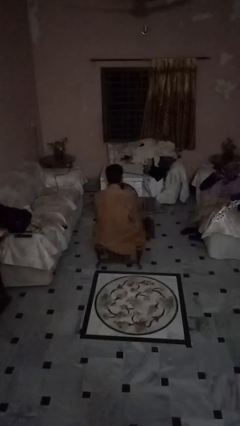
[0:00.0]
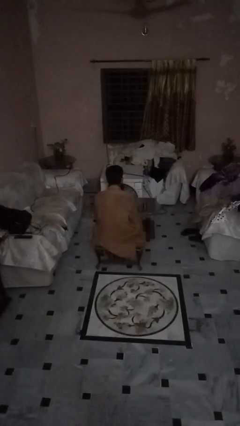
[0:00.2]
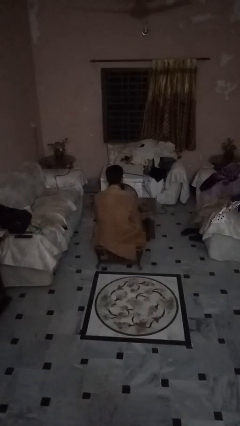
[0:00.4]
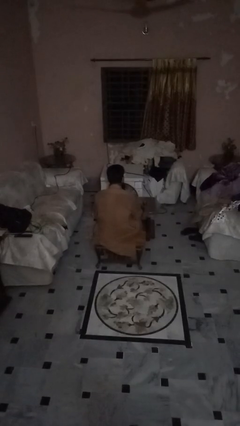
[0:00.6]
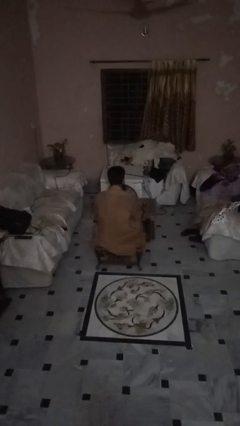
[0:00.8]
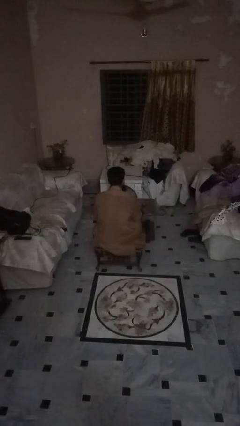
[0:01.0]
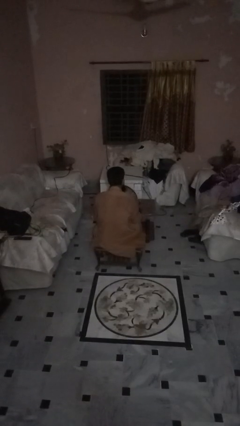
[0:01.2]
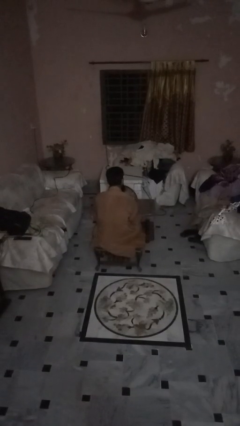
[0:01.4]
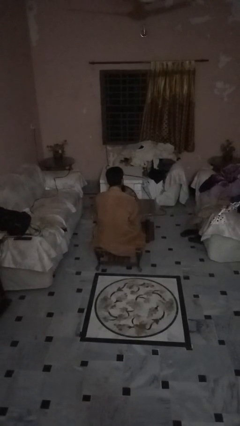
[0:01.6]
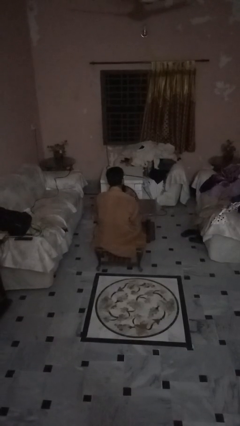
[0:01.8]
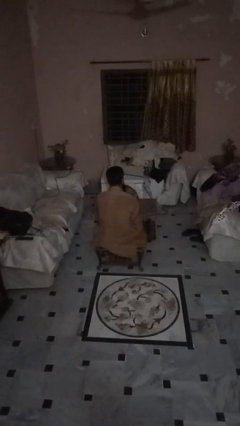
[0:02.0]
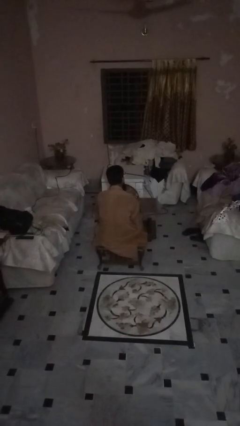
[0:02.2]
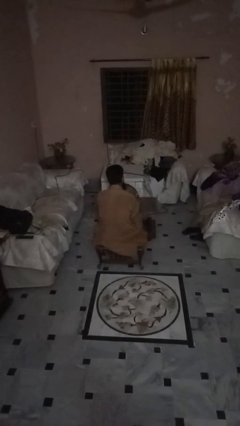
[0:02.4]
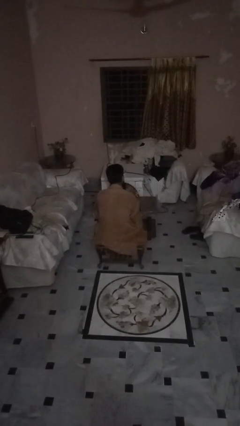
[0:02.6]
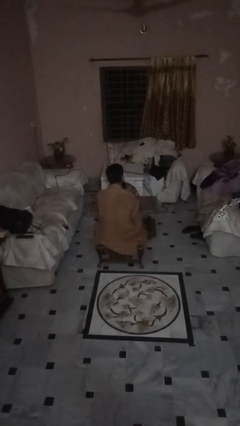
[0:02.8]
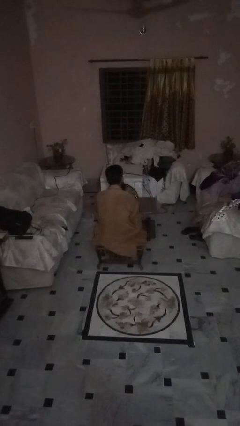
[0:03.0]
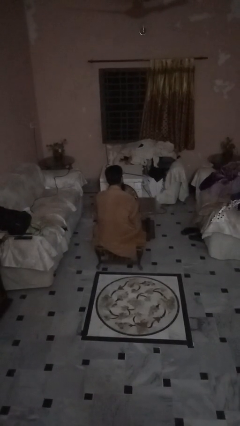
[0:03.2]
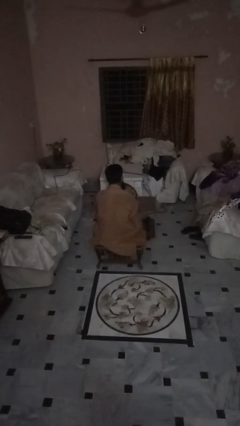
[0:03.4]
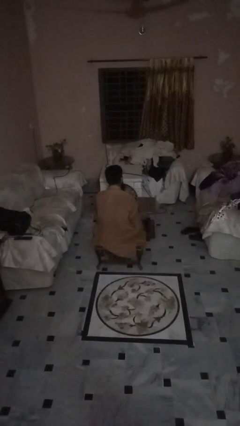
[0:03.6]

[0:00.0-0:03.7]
person opens beverage can

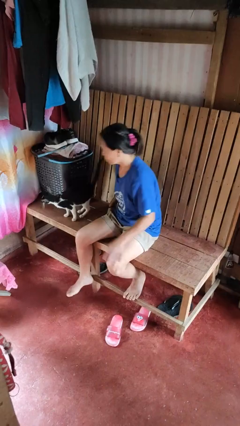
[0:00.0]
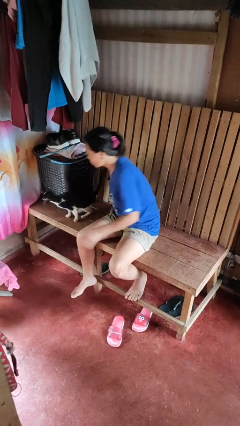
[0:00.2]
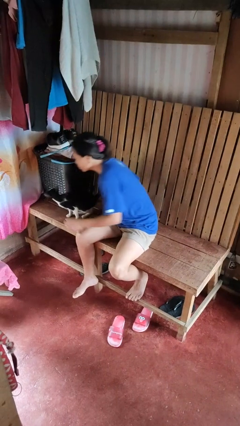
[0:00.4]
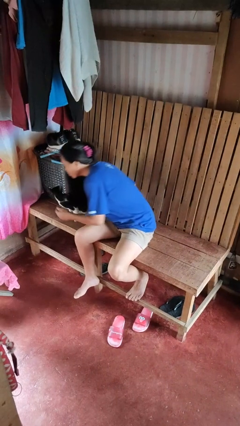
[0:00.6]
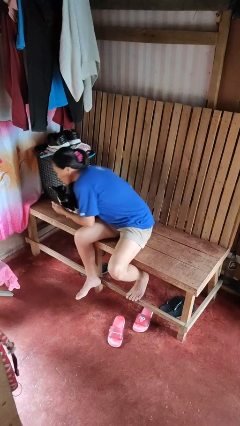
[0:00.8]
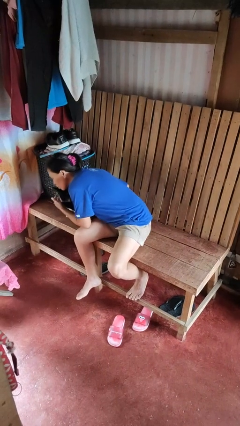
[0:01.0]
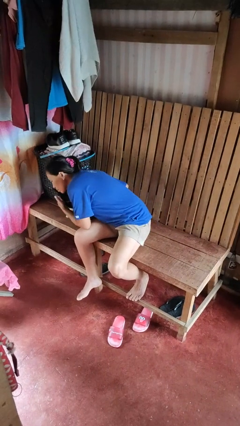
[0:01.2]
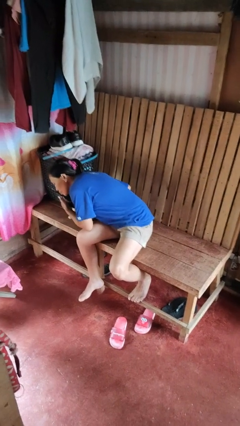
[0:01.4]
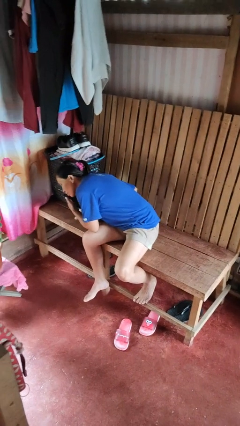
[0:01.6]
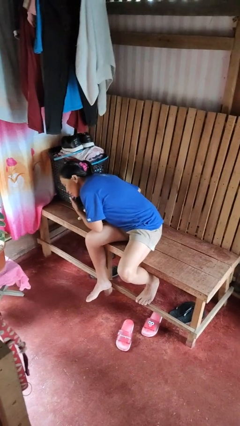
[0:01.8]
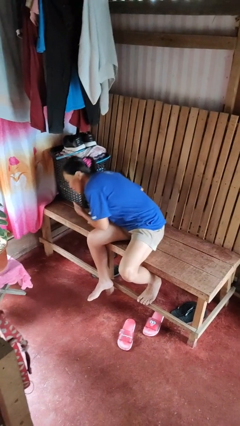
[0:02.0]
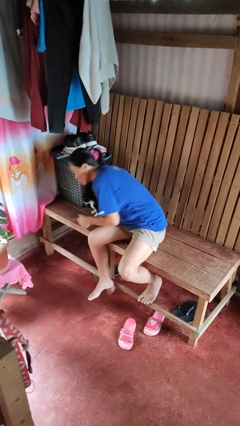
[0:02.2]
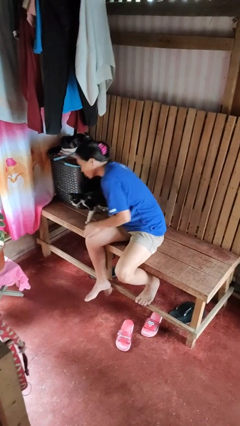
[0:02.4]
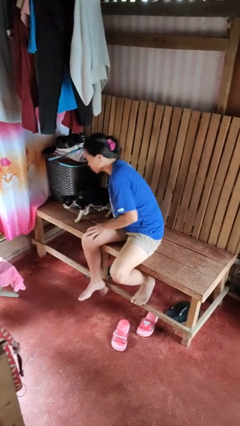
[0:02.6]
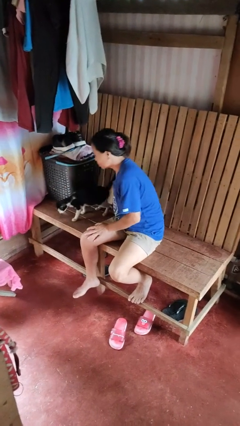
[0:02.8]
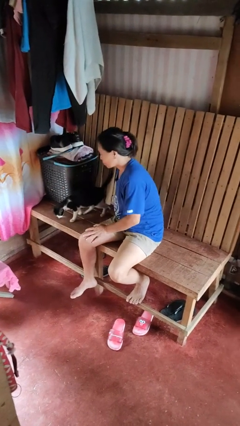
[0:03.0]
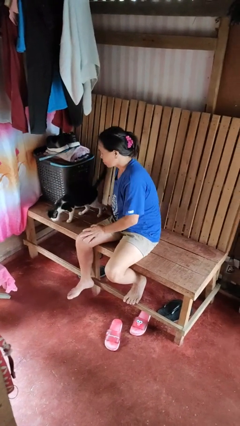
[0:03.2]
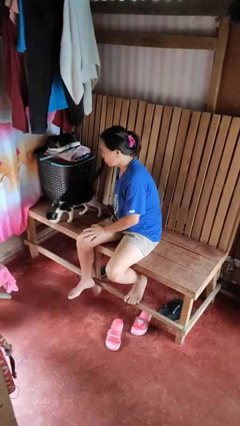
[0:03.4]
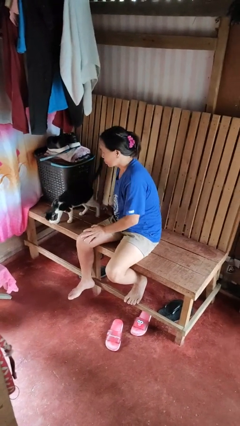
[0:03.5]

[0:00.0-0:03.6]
person hugs cat

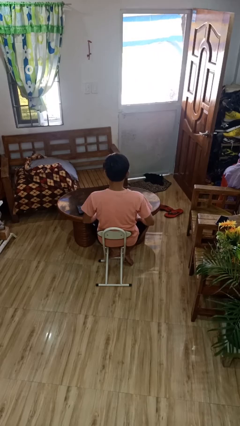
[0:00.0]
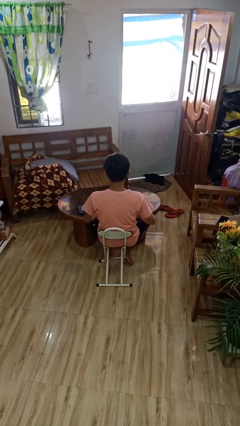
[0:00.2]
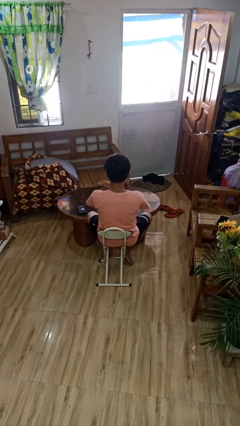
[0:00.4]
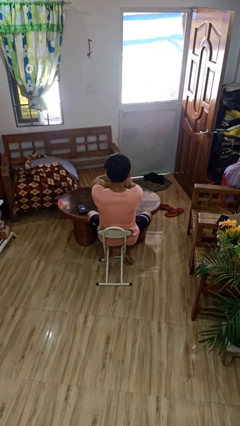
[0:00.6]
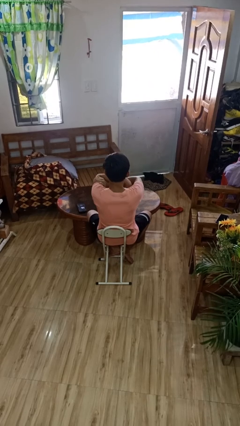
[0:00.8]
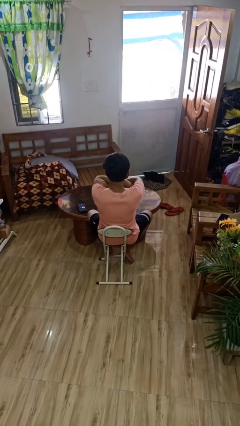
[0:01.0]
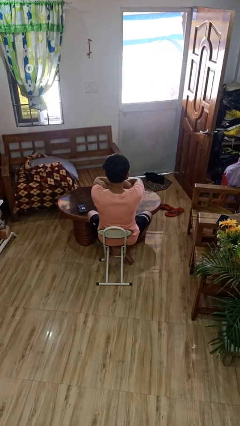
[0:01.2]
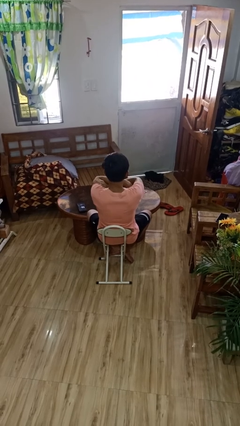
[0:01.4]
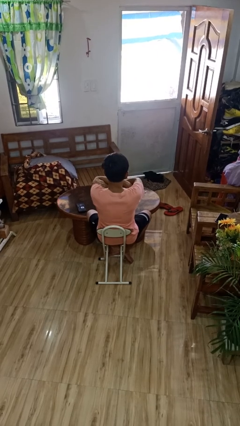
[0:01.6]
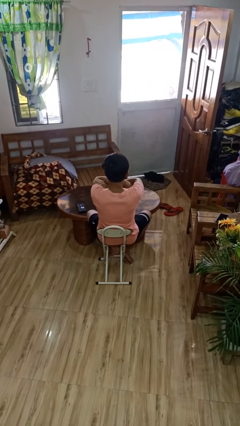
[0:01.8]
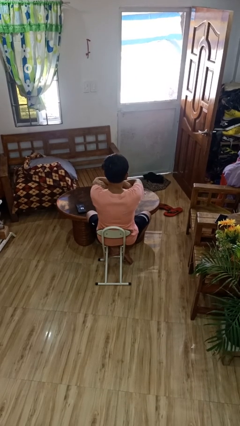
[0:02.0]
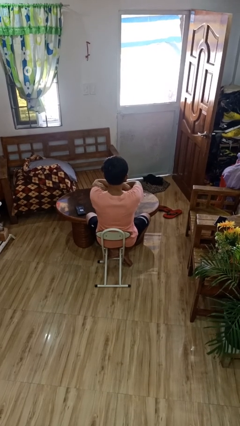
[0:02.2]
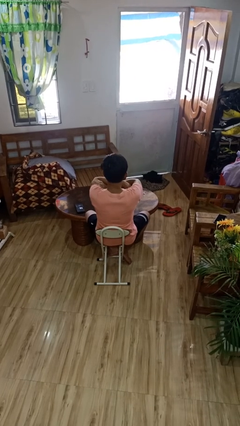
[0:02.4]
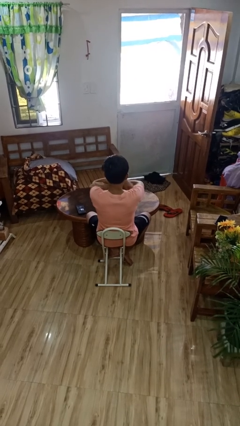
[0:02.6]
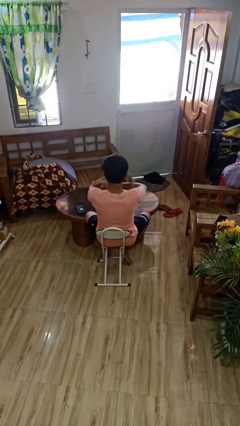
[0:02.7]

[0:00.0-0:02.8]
person crosses arms

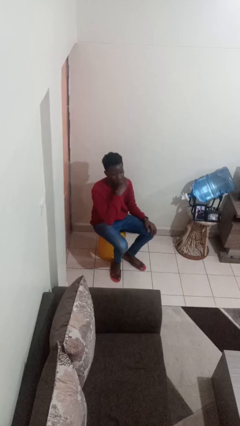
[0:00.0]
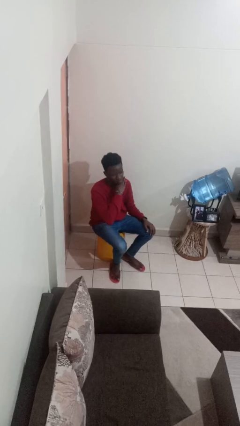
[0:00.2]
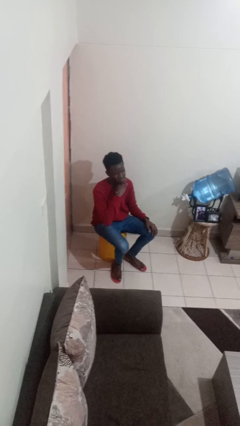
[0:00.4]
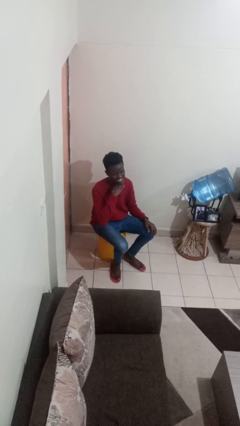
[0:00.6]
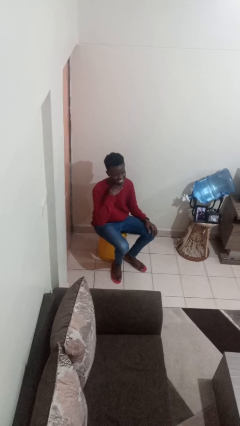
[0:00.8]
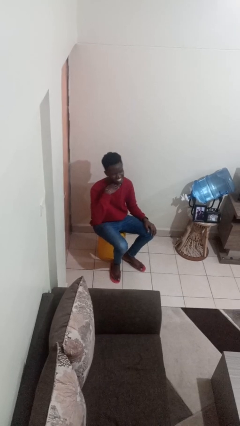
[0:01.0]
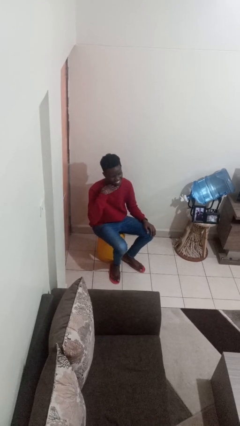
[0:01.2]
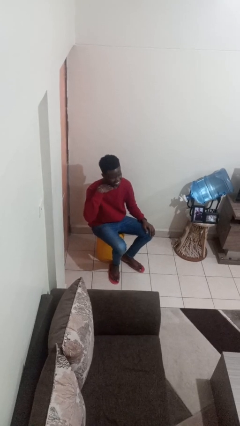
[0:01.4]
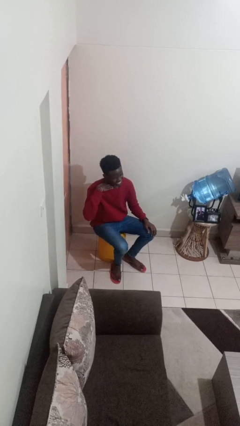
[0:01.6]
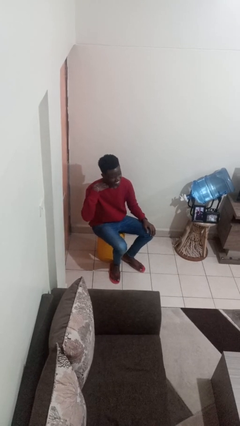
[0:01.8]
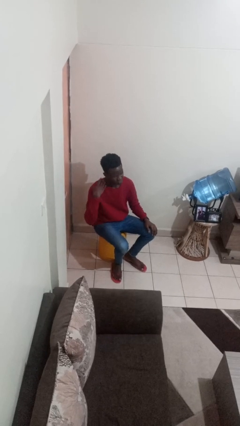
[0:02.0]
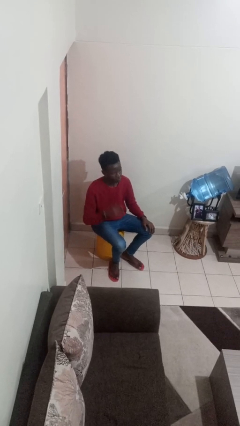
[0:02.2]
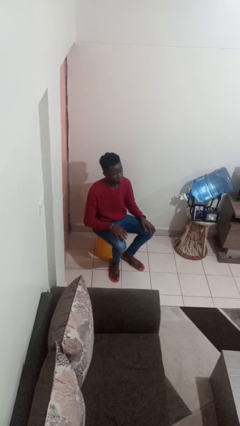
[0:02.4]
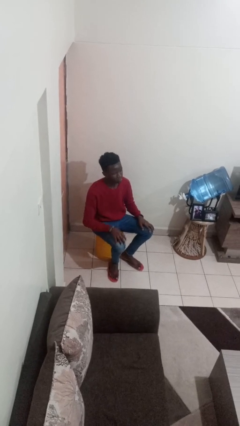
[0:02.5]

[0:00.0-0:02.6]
person gestures cut

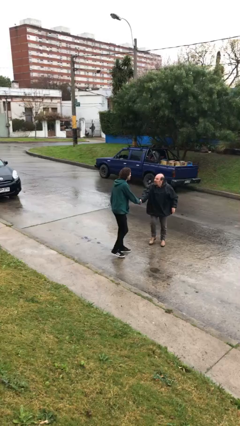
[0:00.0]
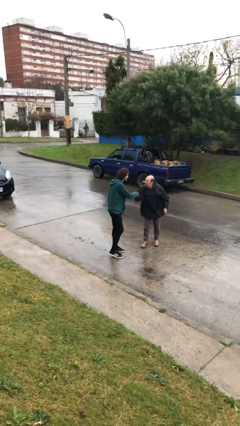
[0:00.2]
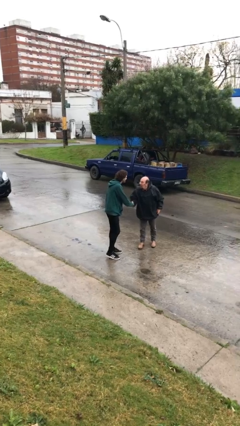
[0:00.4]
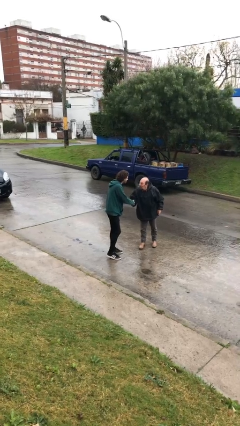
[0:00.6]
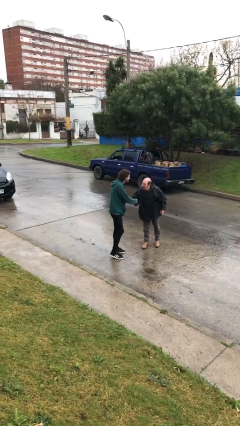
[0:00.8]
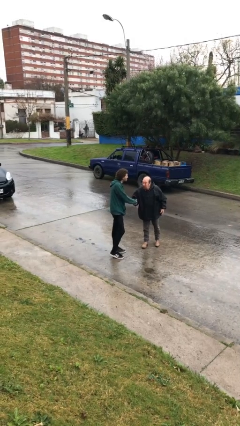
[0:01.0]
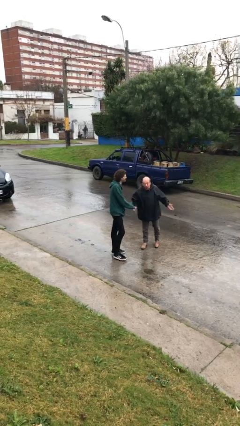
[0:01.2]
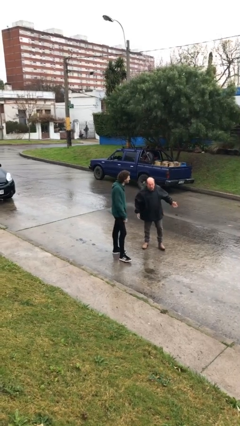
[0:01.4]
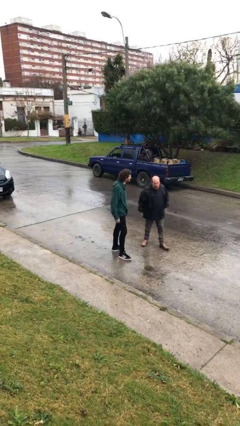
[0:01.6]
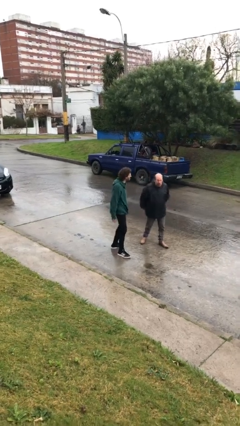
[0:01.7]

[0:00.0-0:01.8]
person shakes hand

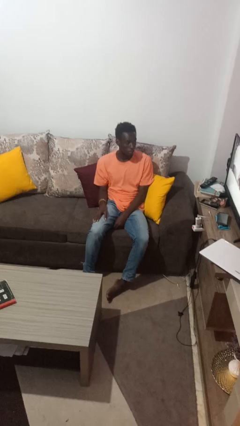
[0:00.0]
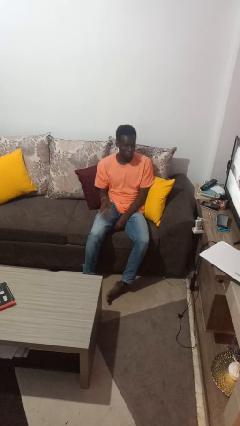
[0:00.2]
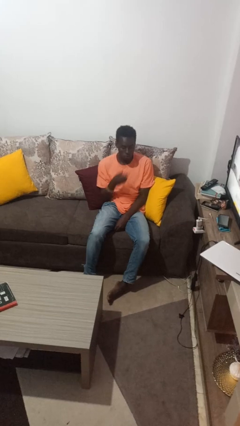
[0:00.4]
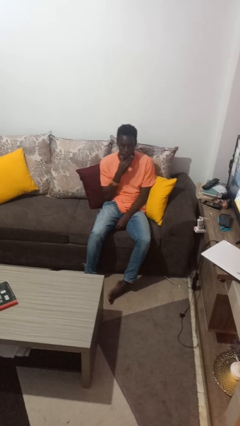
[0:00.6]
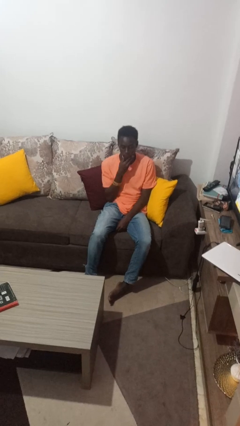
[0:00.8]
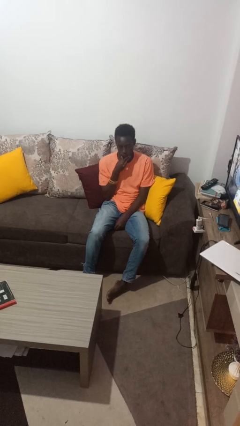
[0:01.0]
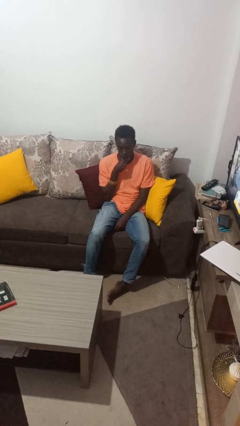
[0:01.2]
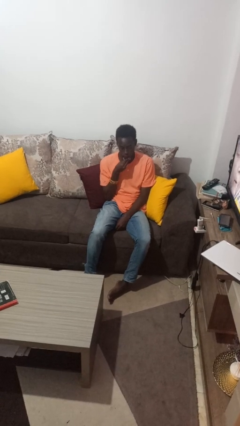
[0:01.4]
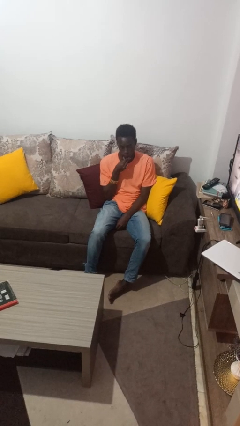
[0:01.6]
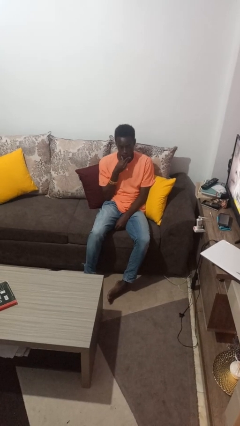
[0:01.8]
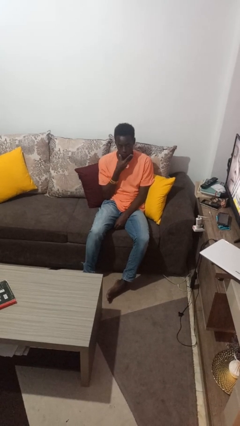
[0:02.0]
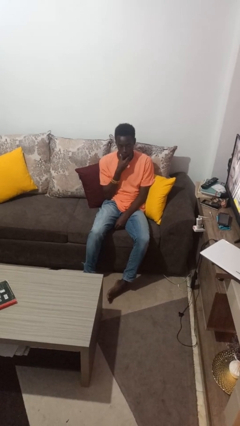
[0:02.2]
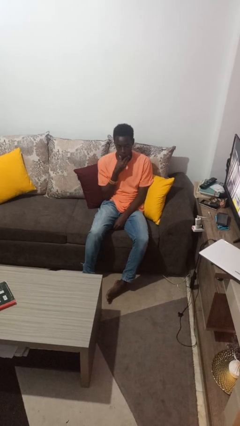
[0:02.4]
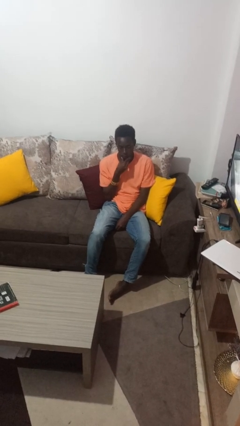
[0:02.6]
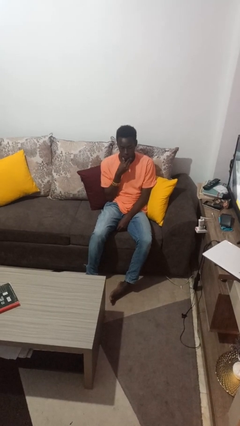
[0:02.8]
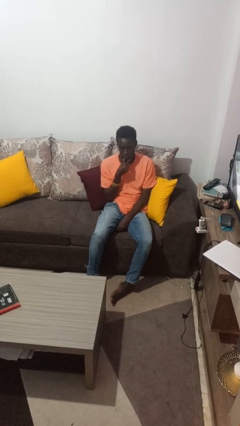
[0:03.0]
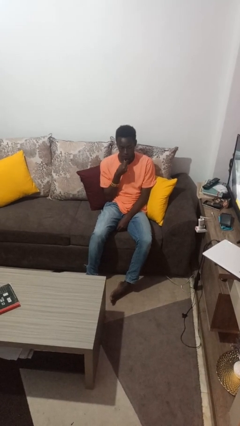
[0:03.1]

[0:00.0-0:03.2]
person strokes chin
